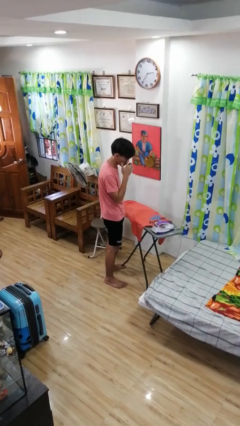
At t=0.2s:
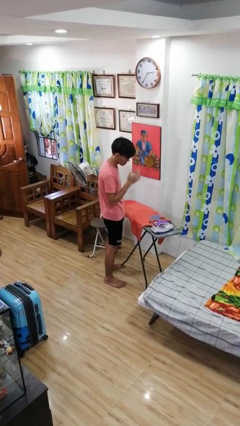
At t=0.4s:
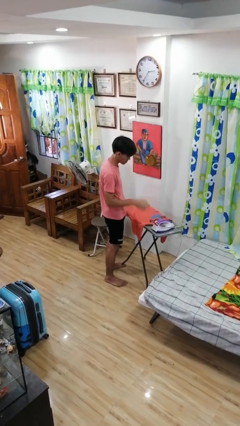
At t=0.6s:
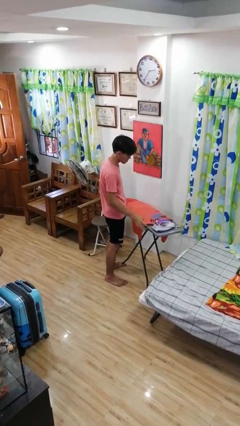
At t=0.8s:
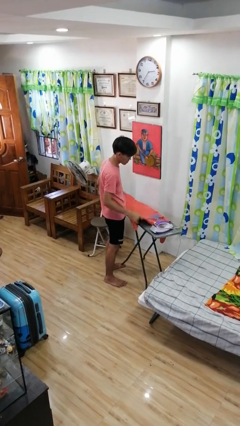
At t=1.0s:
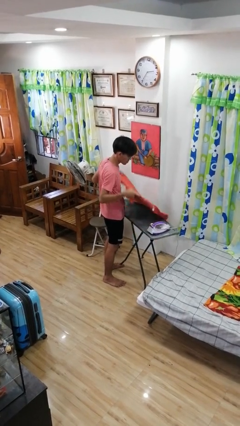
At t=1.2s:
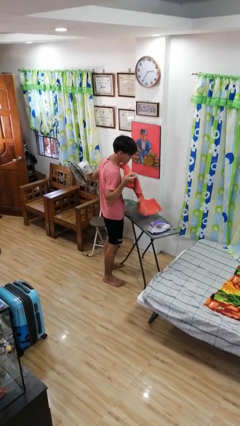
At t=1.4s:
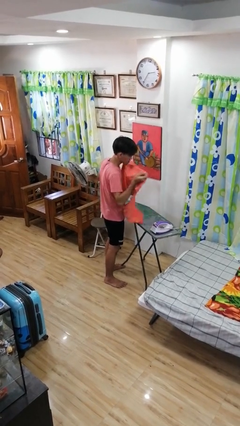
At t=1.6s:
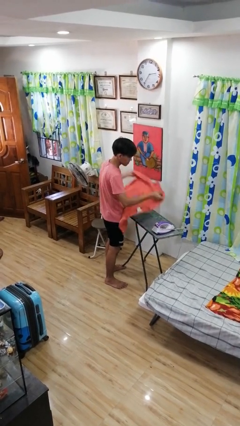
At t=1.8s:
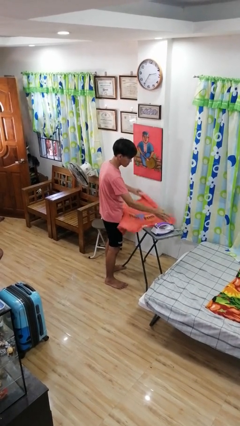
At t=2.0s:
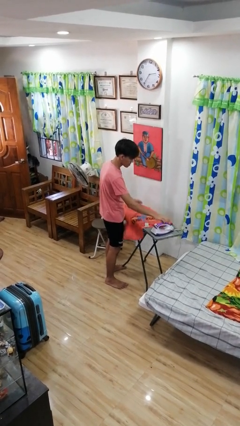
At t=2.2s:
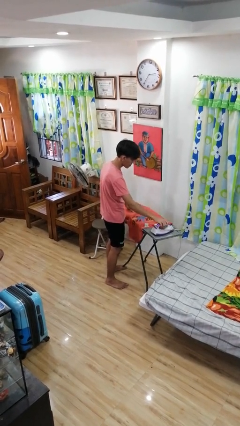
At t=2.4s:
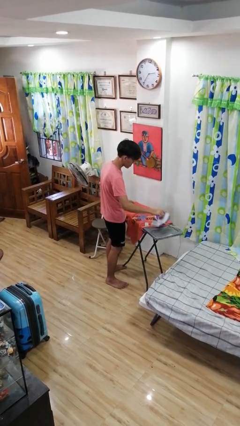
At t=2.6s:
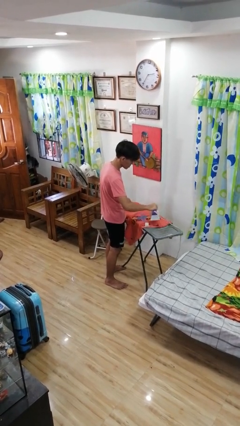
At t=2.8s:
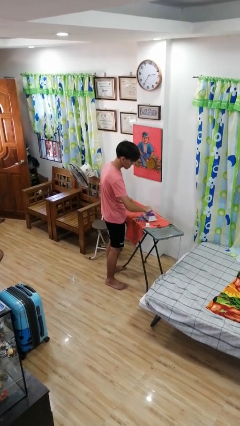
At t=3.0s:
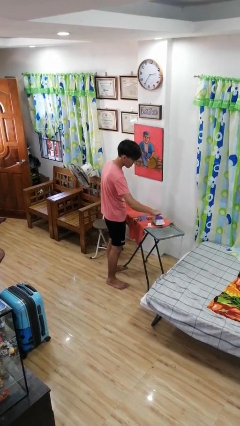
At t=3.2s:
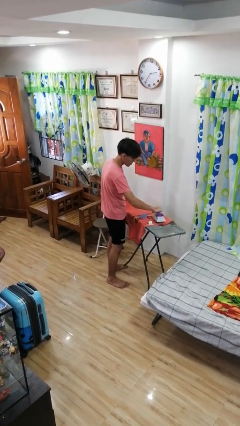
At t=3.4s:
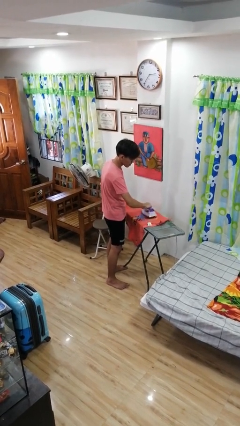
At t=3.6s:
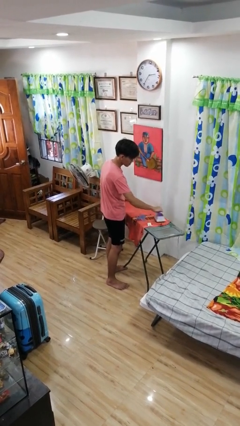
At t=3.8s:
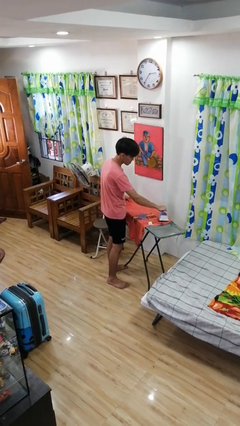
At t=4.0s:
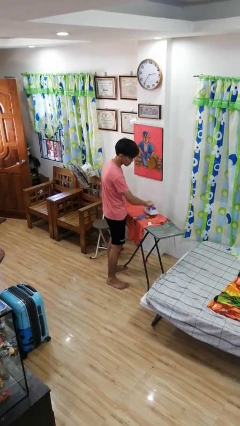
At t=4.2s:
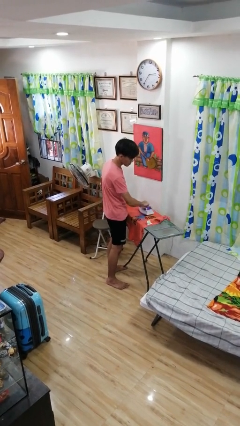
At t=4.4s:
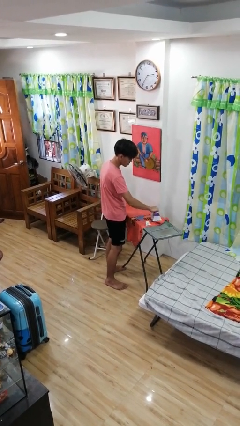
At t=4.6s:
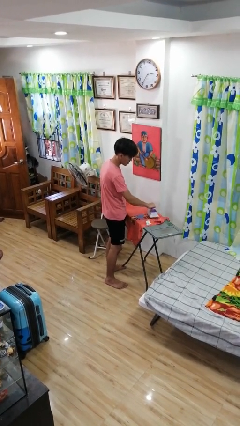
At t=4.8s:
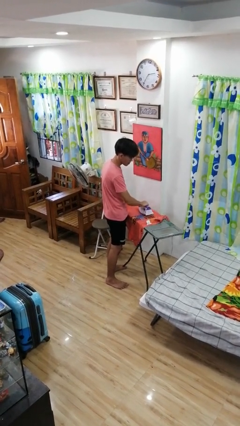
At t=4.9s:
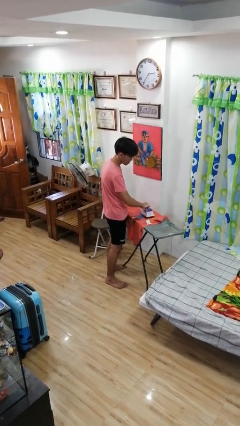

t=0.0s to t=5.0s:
person irons clothes

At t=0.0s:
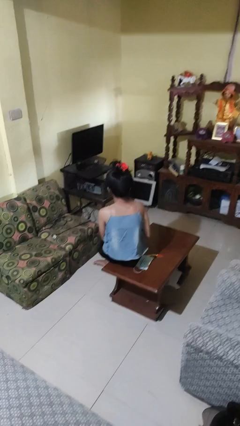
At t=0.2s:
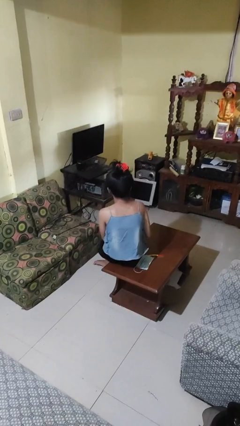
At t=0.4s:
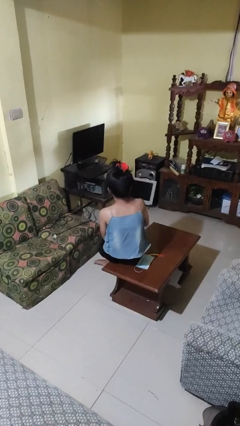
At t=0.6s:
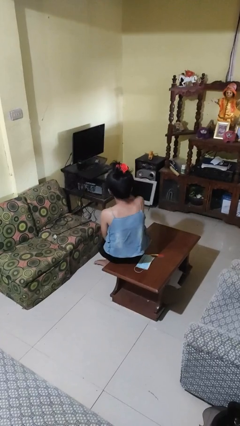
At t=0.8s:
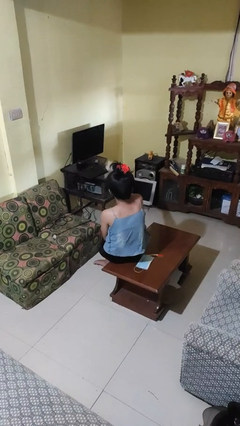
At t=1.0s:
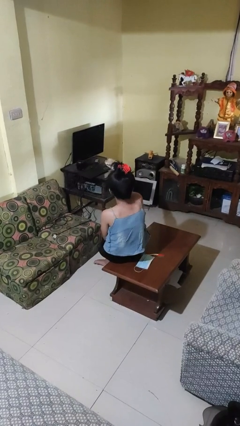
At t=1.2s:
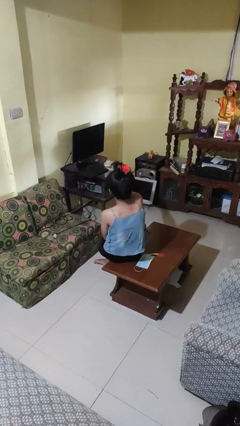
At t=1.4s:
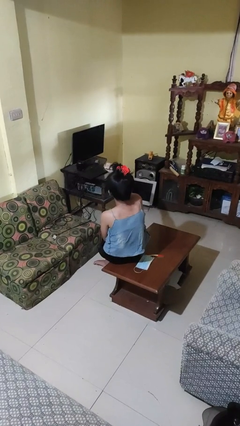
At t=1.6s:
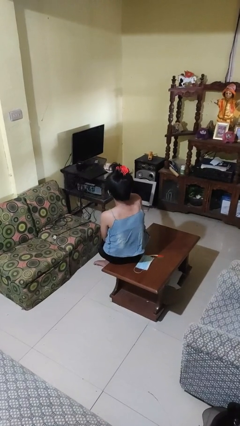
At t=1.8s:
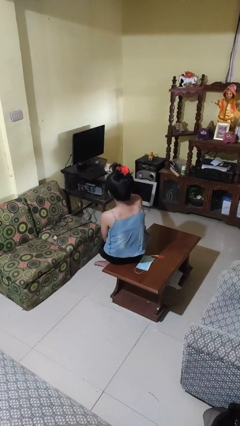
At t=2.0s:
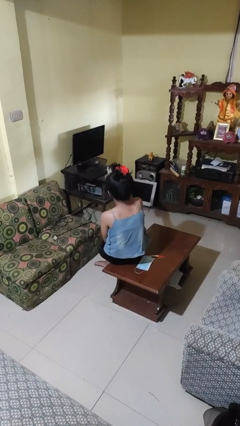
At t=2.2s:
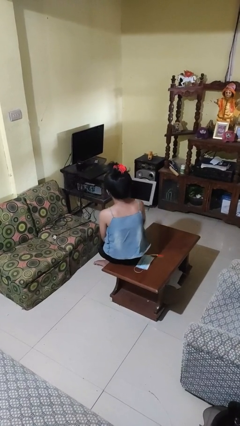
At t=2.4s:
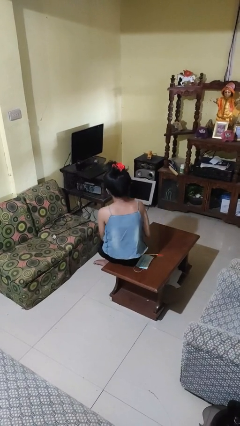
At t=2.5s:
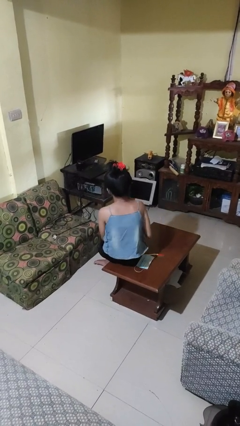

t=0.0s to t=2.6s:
person uses television remote

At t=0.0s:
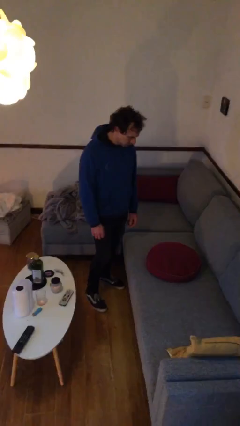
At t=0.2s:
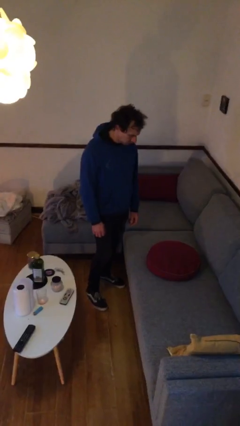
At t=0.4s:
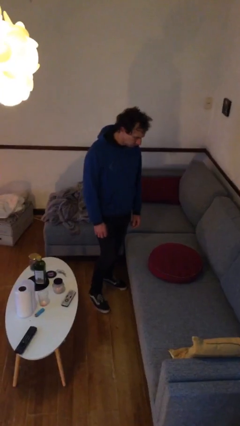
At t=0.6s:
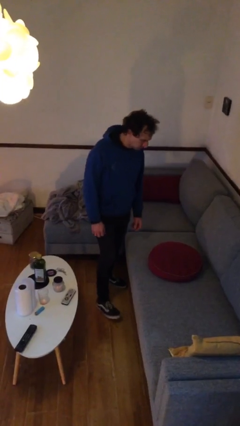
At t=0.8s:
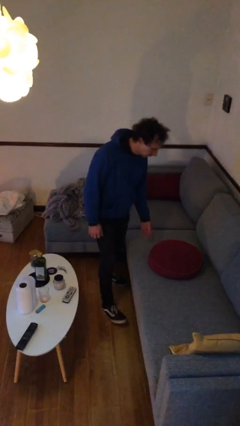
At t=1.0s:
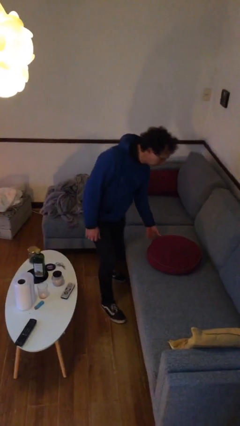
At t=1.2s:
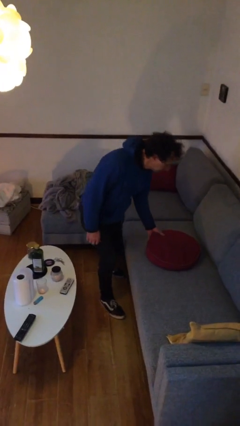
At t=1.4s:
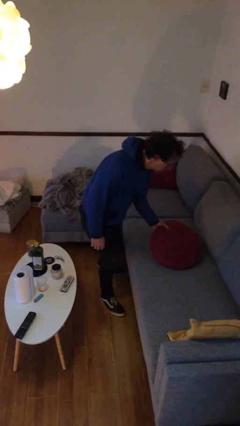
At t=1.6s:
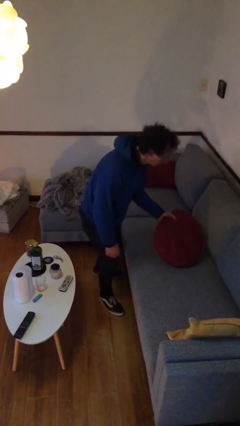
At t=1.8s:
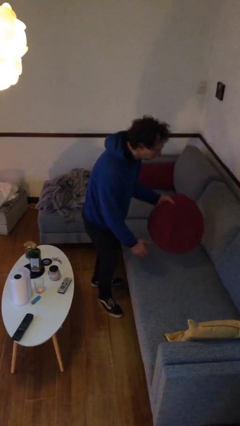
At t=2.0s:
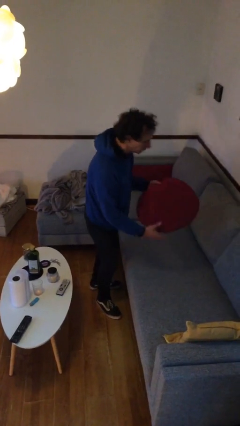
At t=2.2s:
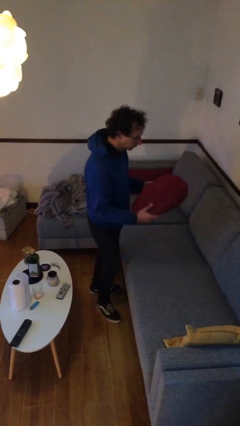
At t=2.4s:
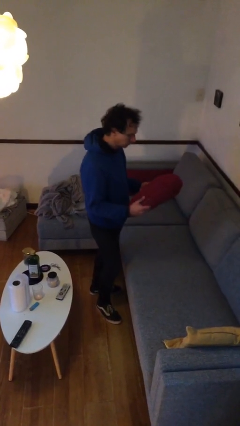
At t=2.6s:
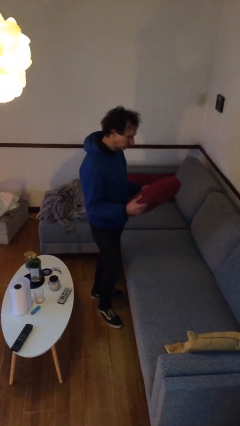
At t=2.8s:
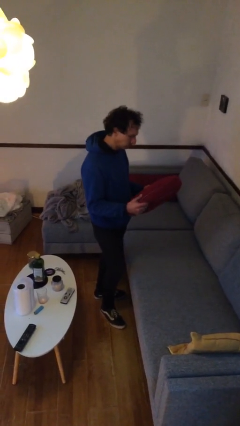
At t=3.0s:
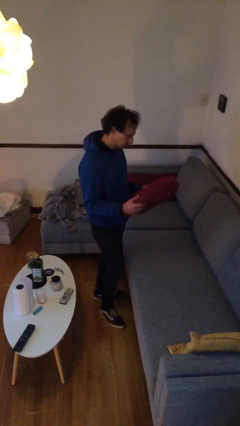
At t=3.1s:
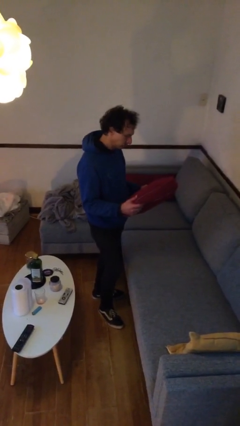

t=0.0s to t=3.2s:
person picks up object from couch

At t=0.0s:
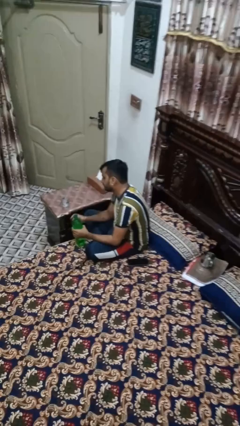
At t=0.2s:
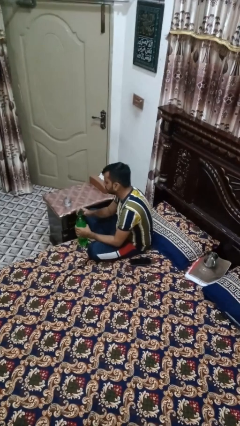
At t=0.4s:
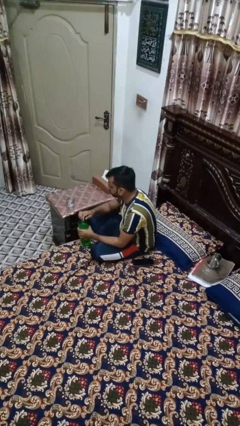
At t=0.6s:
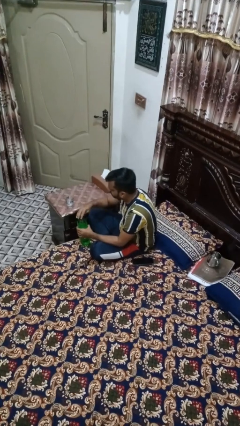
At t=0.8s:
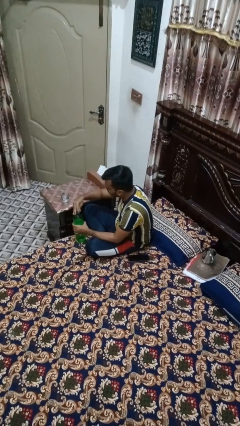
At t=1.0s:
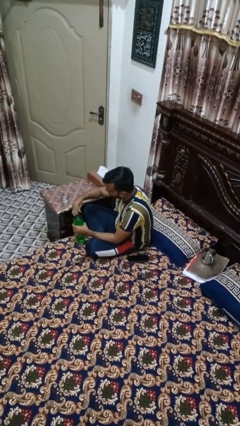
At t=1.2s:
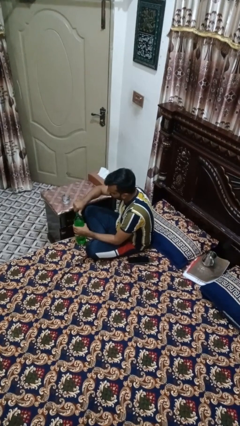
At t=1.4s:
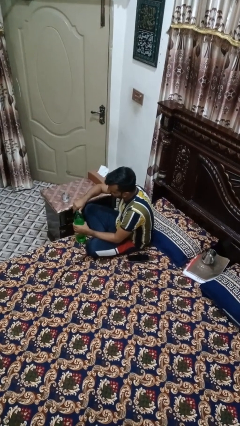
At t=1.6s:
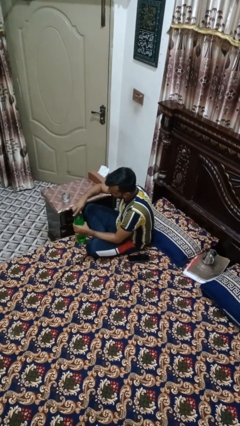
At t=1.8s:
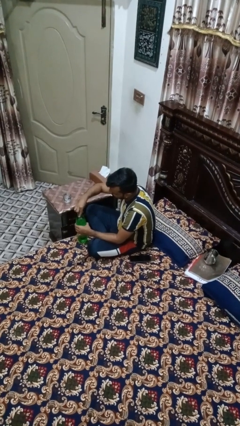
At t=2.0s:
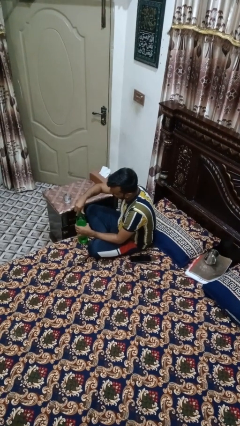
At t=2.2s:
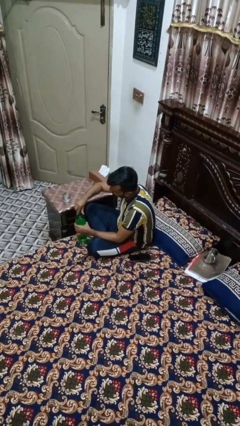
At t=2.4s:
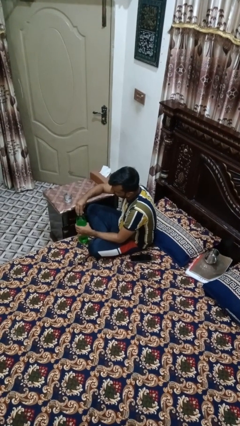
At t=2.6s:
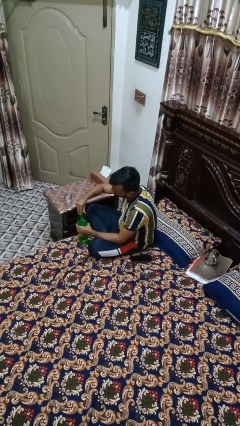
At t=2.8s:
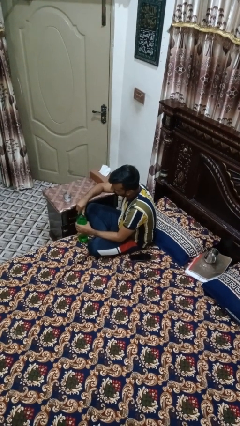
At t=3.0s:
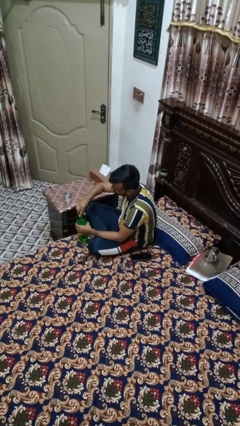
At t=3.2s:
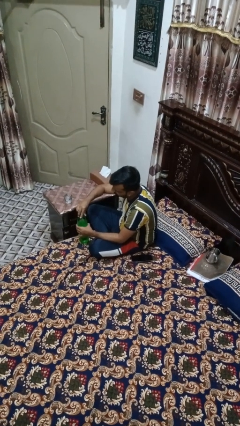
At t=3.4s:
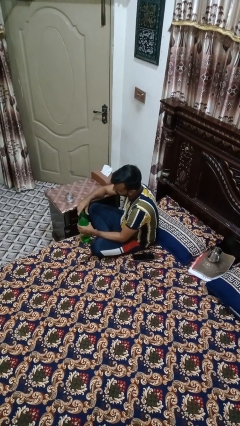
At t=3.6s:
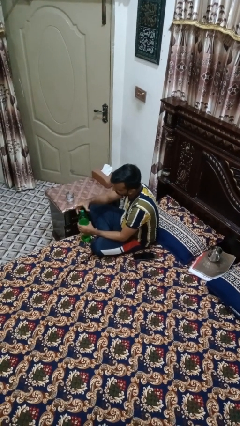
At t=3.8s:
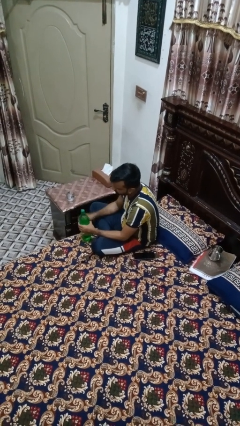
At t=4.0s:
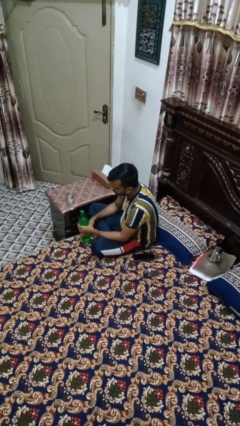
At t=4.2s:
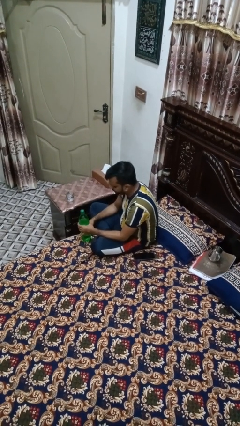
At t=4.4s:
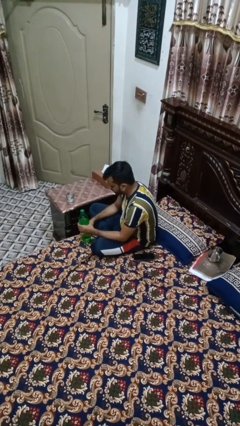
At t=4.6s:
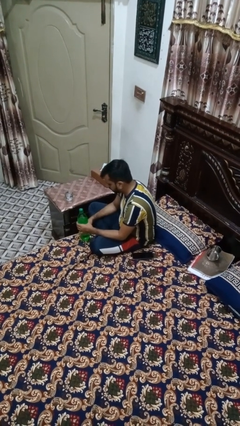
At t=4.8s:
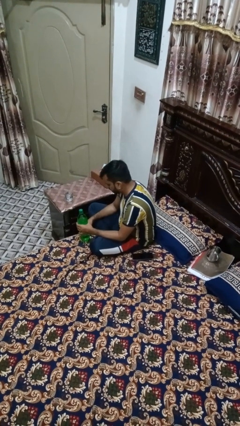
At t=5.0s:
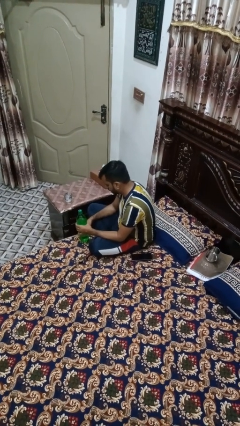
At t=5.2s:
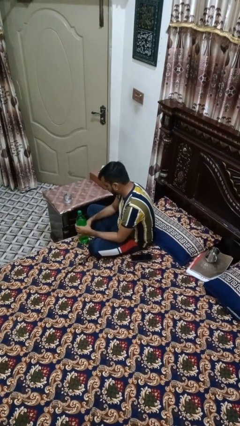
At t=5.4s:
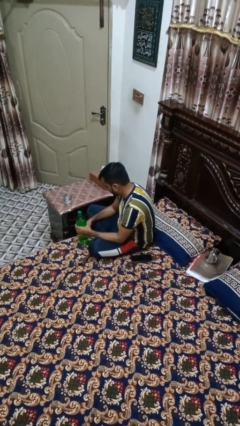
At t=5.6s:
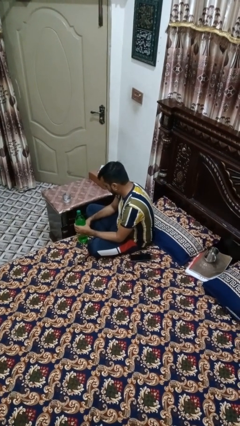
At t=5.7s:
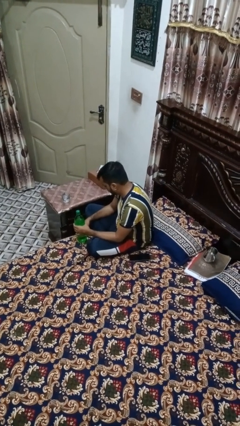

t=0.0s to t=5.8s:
person screws lid to bottle

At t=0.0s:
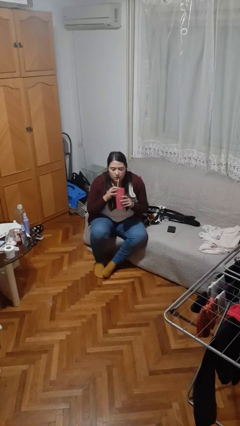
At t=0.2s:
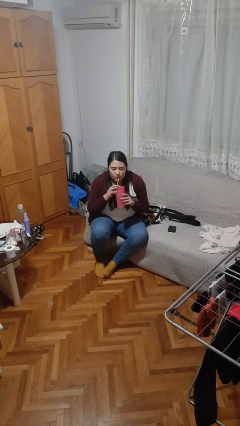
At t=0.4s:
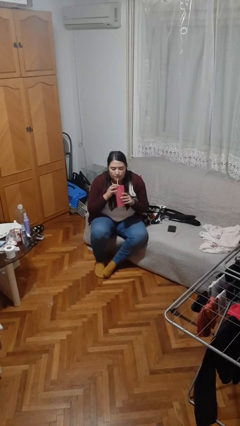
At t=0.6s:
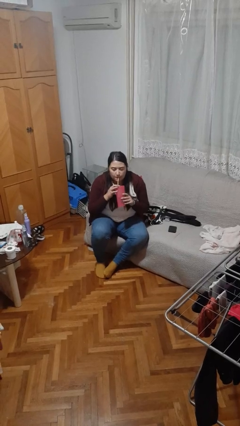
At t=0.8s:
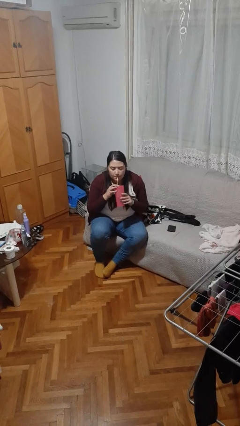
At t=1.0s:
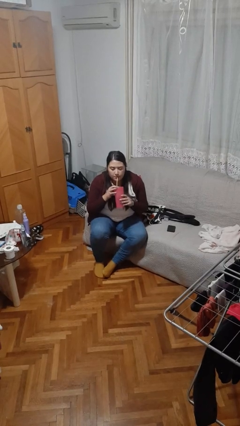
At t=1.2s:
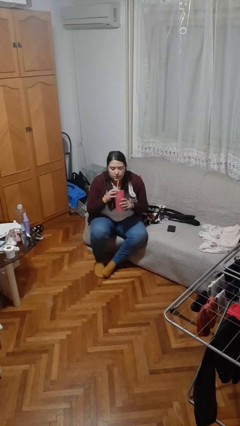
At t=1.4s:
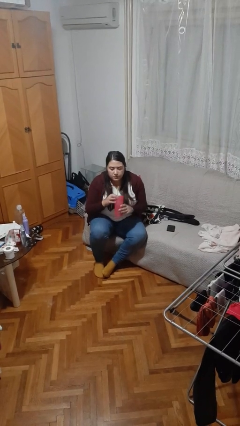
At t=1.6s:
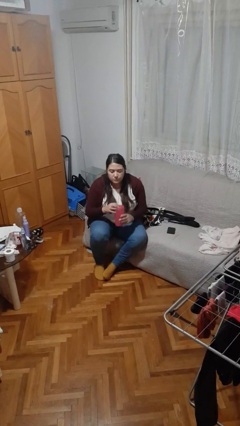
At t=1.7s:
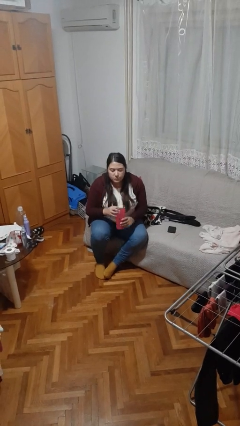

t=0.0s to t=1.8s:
person drinks from straw
